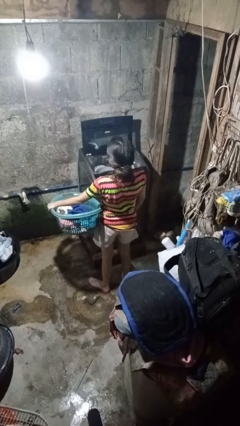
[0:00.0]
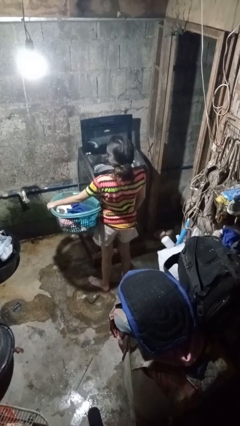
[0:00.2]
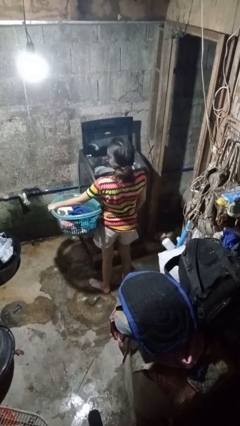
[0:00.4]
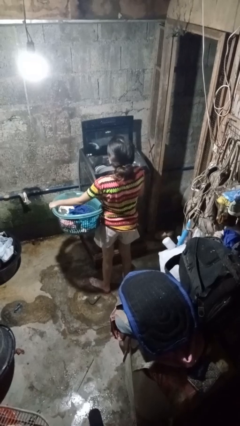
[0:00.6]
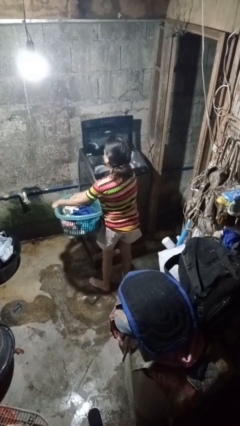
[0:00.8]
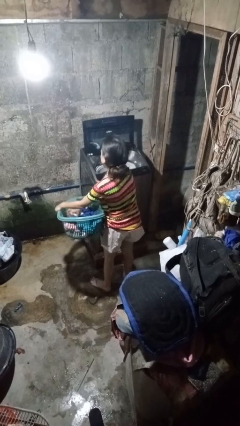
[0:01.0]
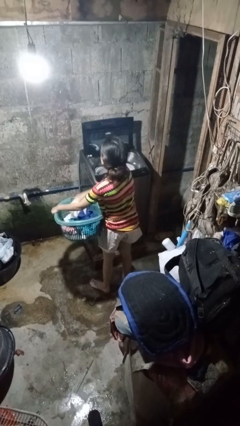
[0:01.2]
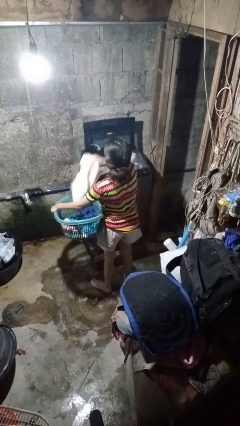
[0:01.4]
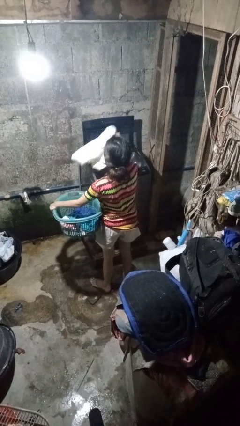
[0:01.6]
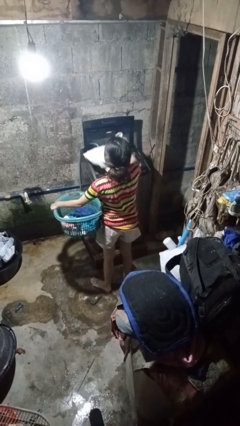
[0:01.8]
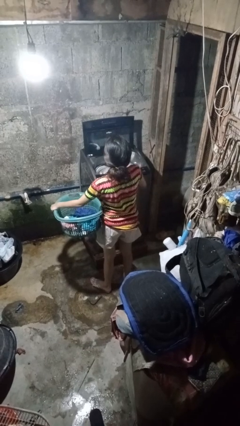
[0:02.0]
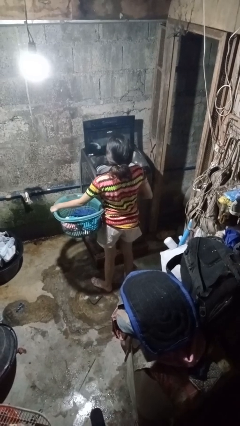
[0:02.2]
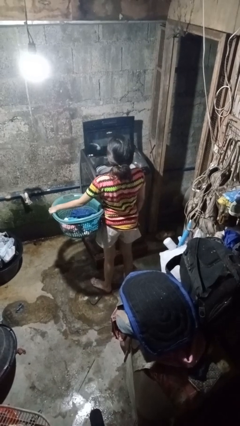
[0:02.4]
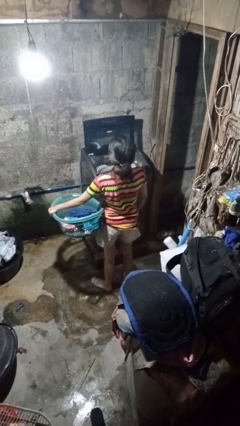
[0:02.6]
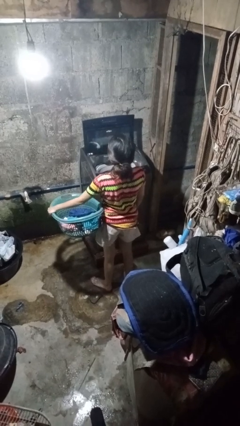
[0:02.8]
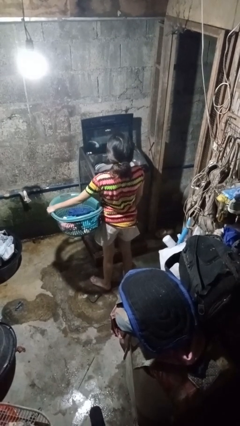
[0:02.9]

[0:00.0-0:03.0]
person loads clotheswasher

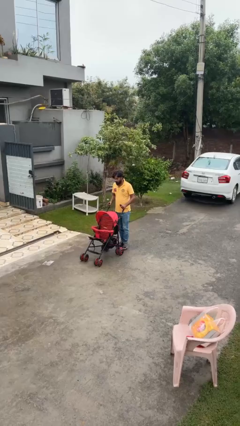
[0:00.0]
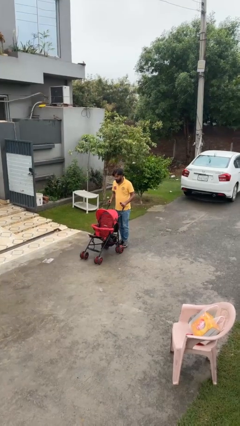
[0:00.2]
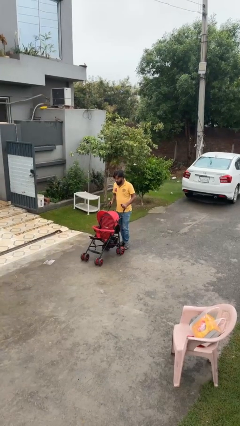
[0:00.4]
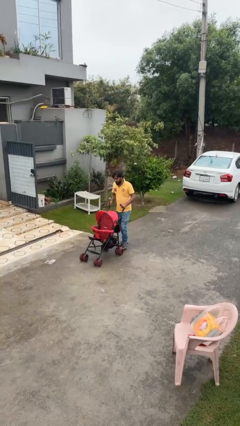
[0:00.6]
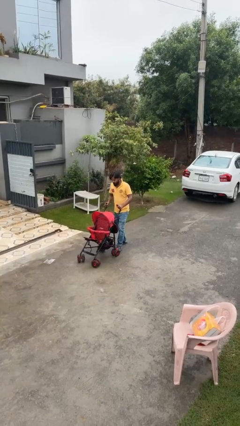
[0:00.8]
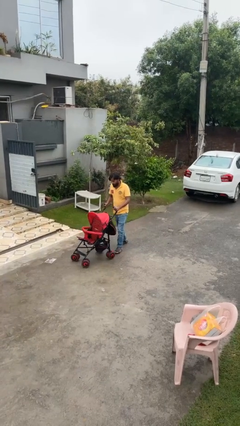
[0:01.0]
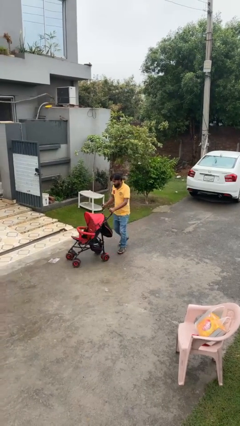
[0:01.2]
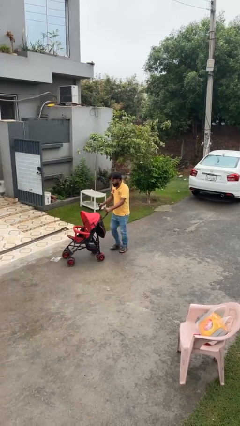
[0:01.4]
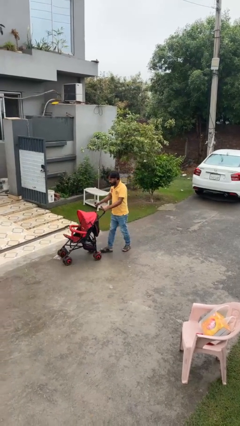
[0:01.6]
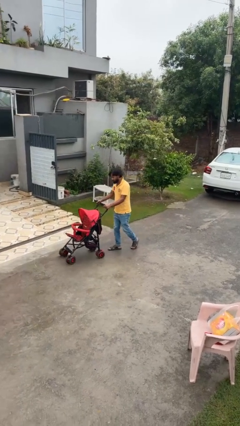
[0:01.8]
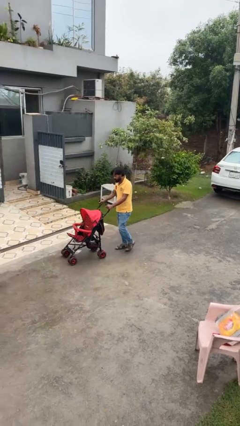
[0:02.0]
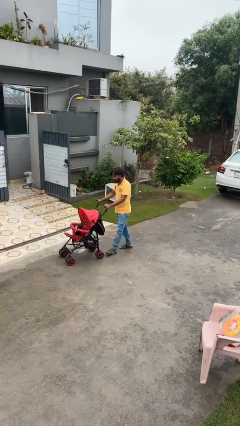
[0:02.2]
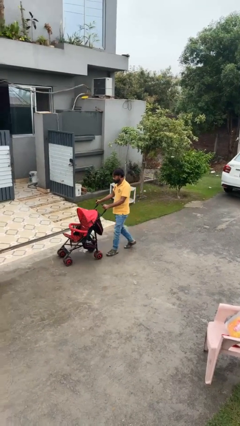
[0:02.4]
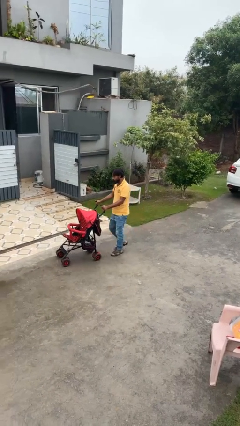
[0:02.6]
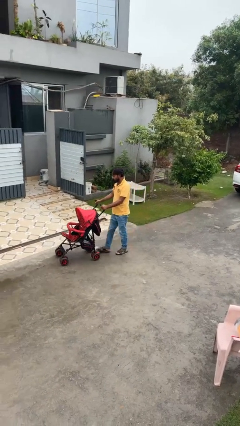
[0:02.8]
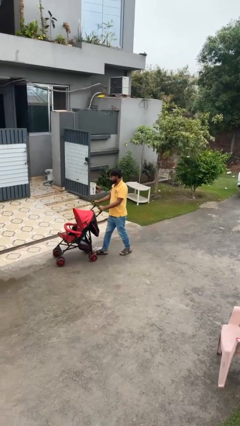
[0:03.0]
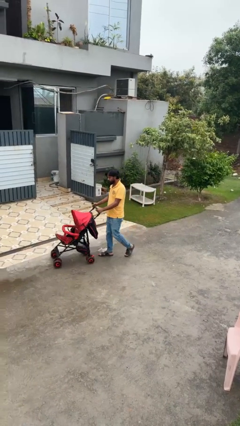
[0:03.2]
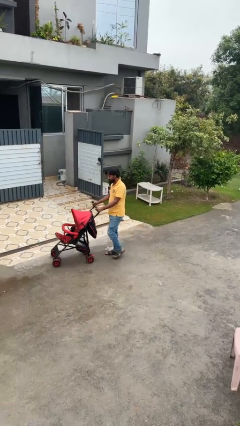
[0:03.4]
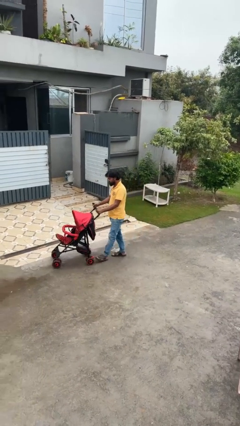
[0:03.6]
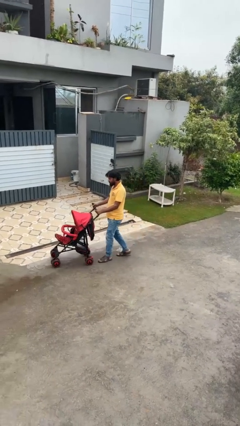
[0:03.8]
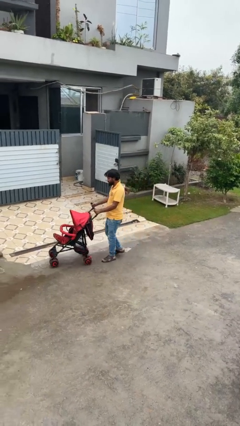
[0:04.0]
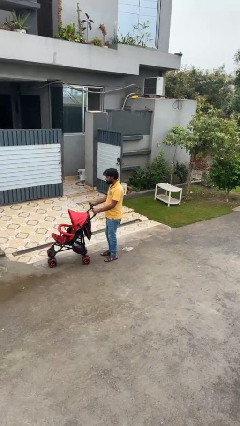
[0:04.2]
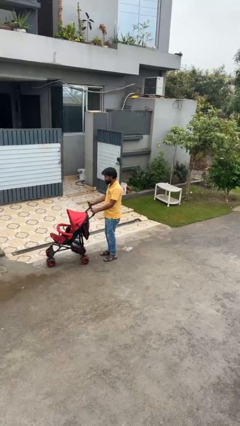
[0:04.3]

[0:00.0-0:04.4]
person pushes wheeled cart

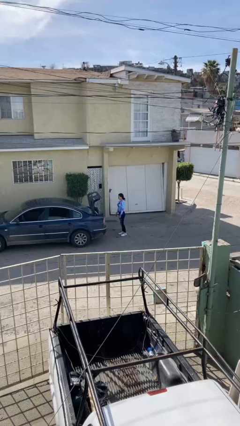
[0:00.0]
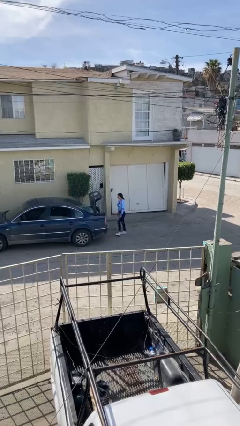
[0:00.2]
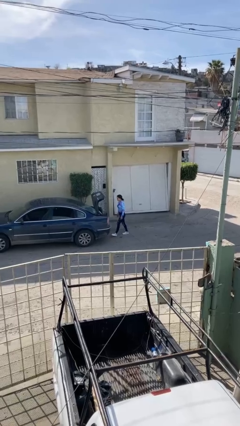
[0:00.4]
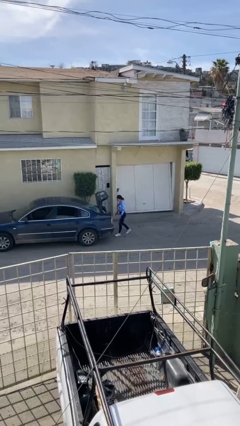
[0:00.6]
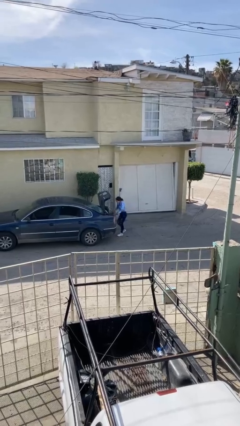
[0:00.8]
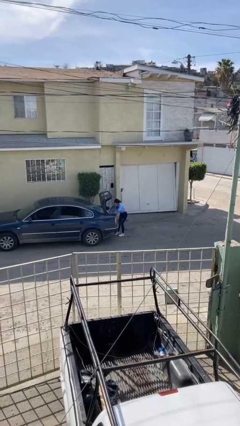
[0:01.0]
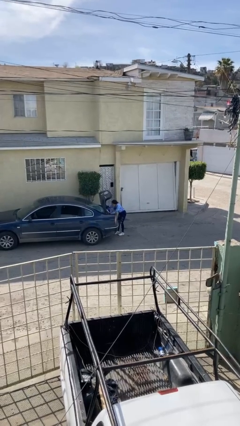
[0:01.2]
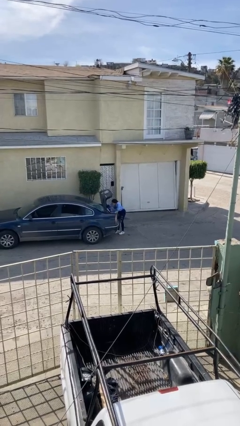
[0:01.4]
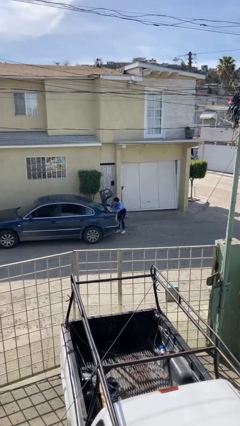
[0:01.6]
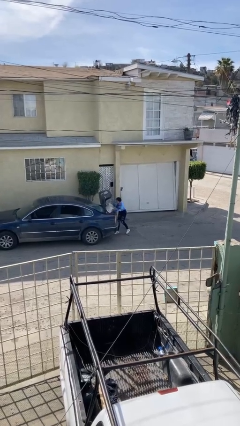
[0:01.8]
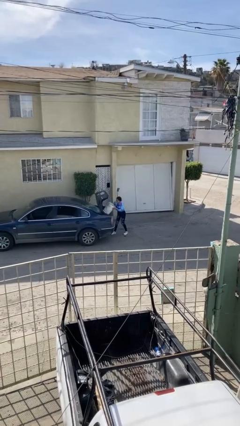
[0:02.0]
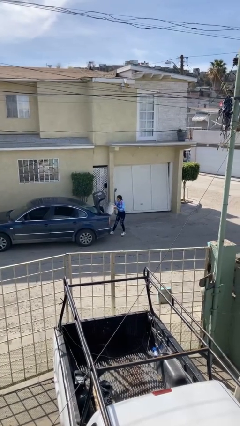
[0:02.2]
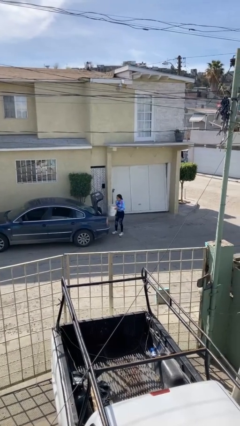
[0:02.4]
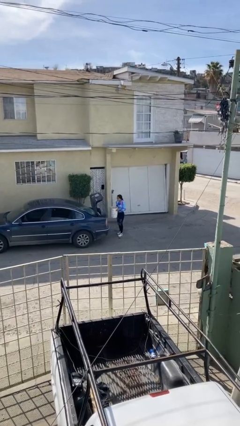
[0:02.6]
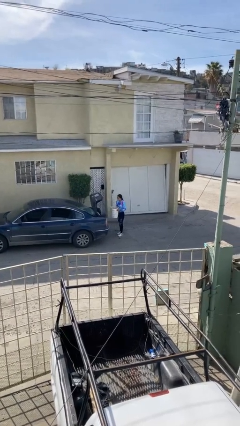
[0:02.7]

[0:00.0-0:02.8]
person unloads car

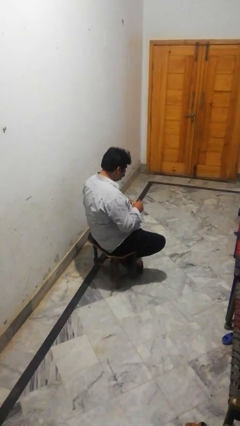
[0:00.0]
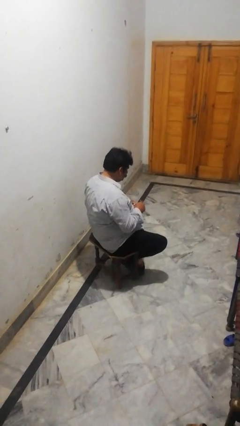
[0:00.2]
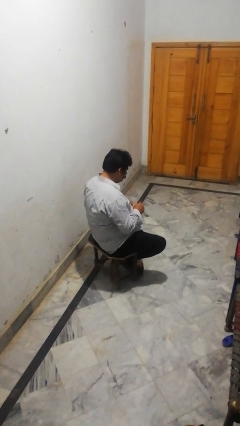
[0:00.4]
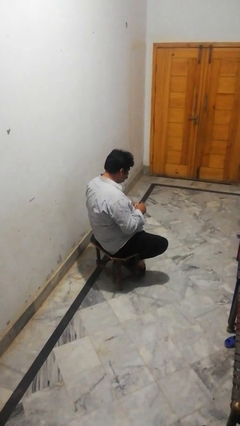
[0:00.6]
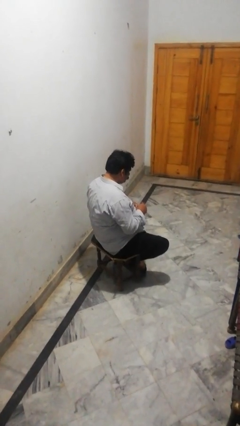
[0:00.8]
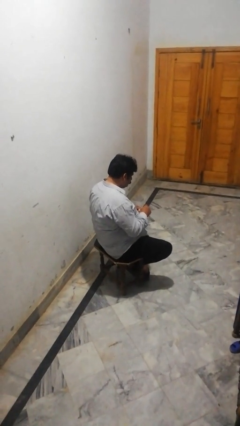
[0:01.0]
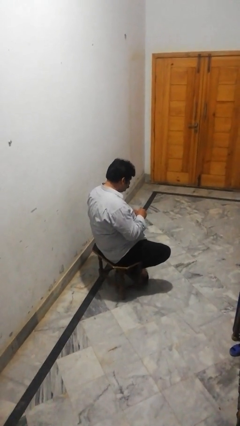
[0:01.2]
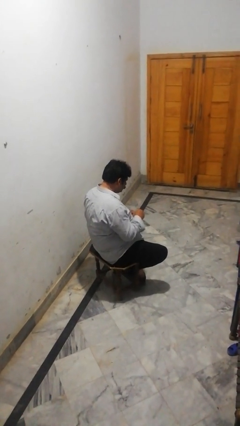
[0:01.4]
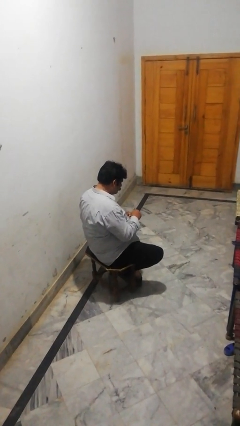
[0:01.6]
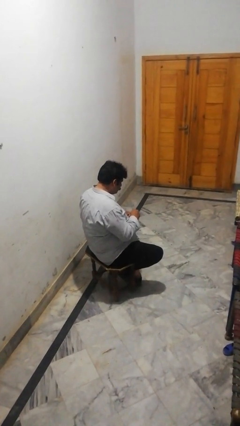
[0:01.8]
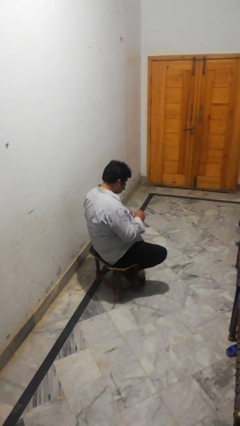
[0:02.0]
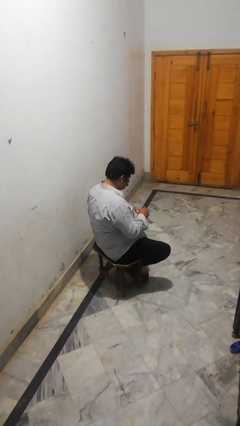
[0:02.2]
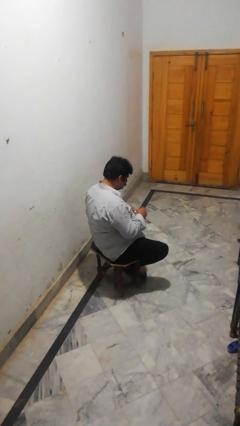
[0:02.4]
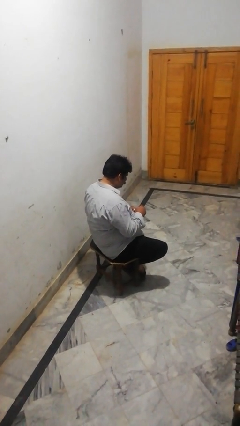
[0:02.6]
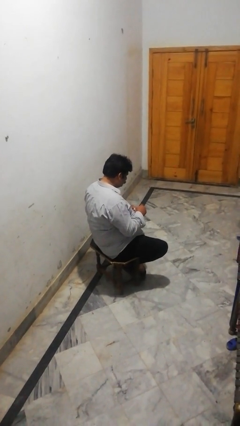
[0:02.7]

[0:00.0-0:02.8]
person stirs mug

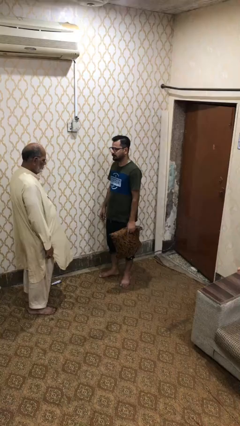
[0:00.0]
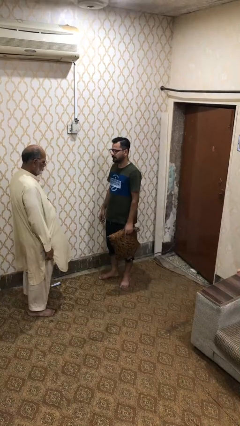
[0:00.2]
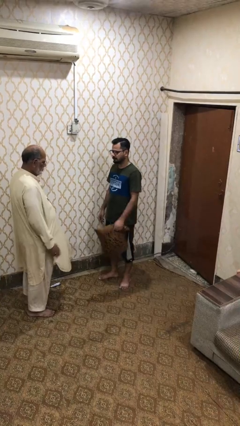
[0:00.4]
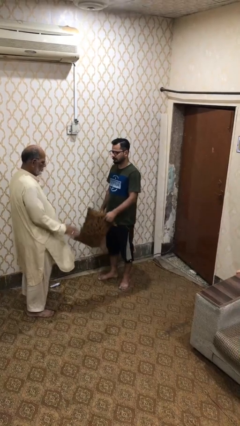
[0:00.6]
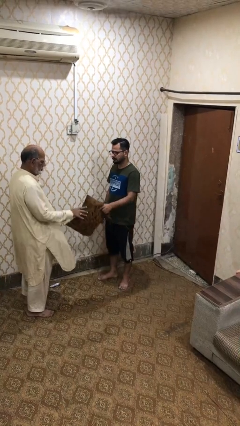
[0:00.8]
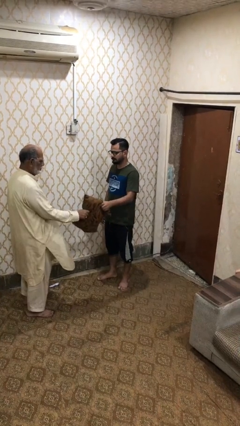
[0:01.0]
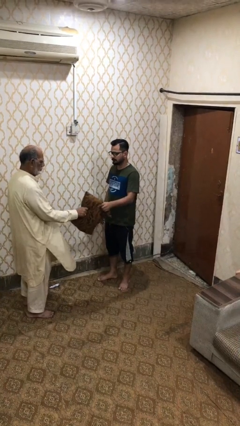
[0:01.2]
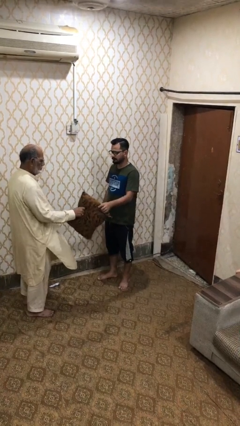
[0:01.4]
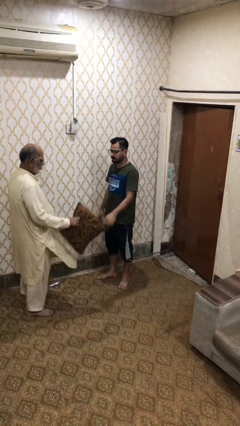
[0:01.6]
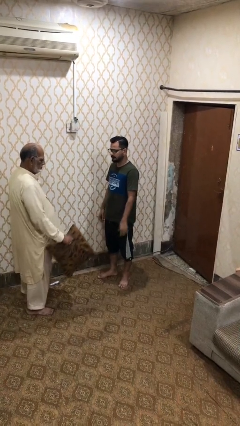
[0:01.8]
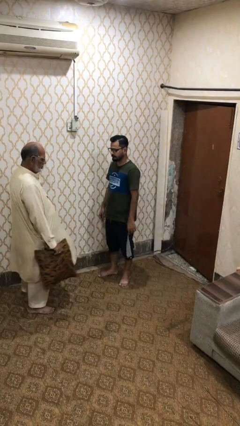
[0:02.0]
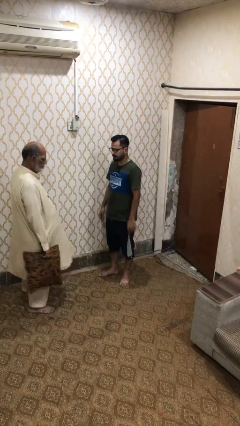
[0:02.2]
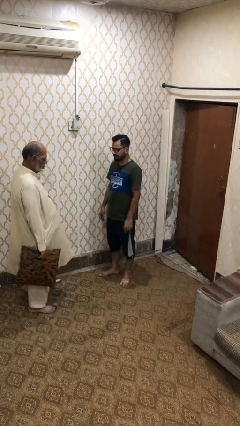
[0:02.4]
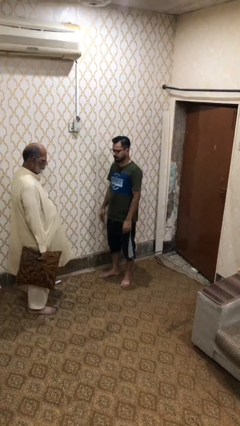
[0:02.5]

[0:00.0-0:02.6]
person transfers object to person

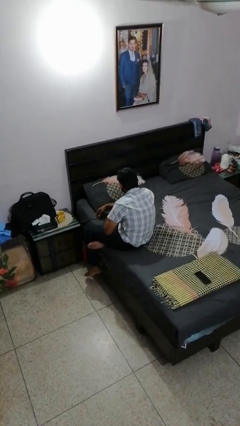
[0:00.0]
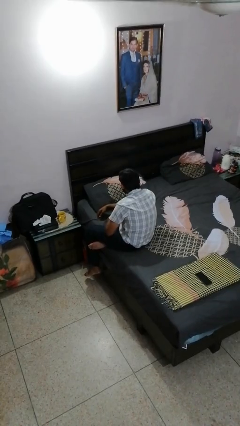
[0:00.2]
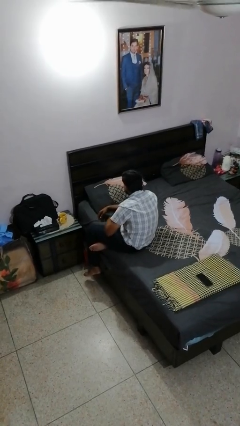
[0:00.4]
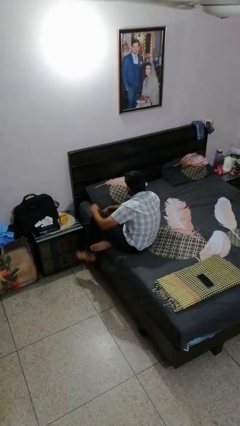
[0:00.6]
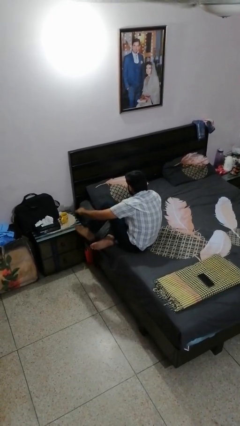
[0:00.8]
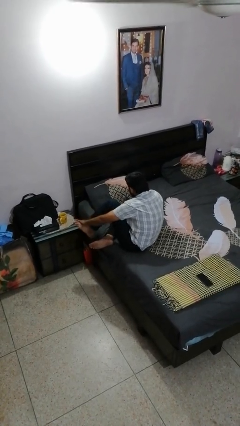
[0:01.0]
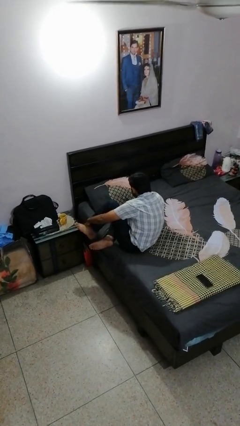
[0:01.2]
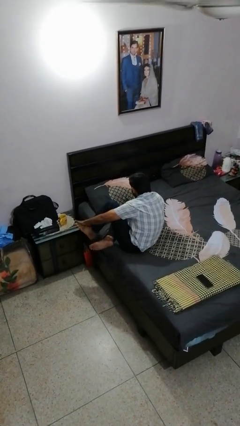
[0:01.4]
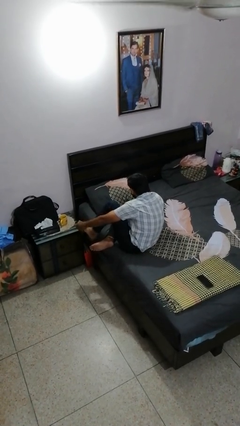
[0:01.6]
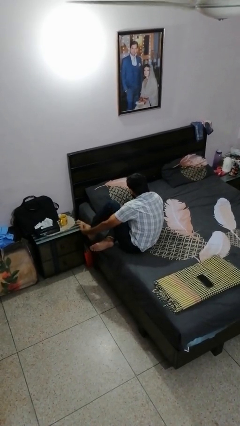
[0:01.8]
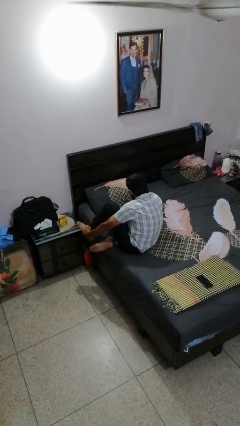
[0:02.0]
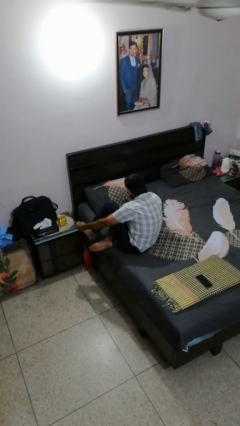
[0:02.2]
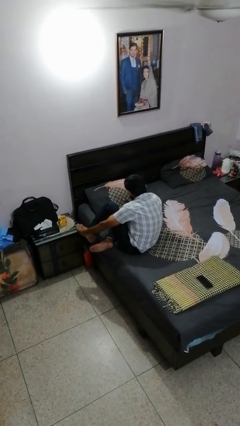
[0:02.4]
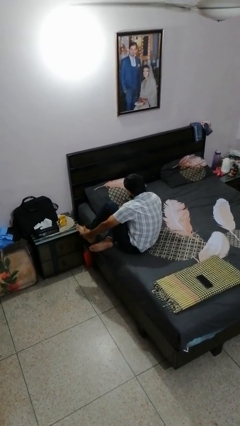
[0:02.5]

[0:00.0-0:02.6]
person rubs foot
